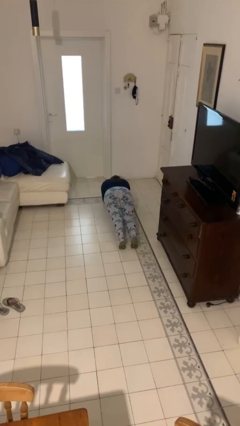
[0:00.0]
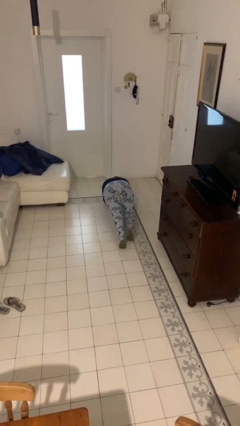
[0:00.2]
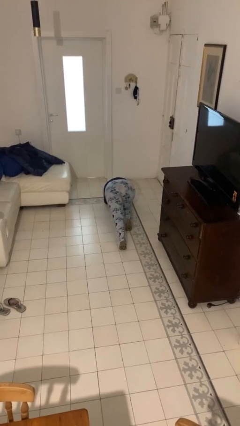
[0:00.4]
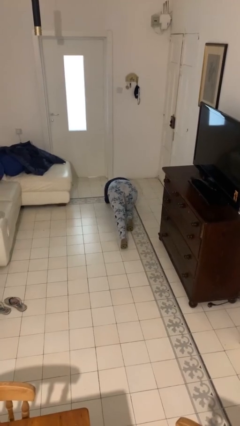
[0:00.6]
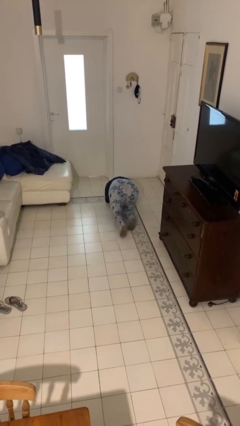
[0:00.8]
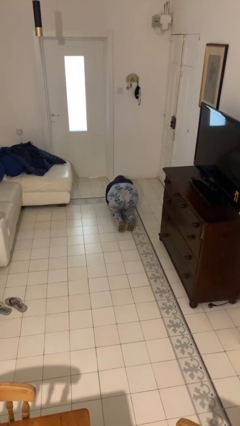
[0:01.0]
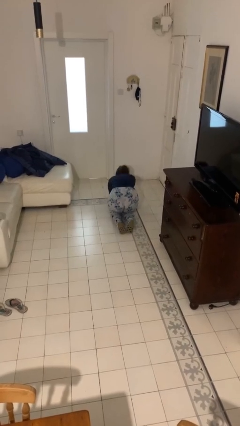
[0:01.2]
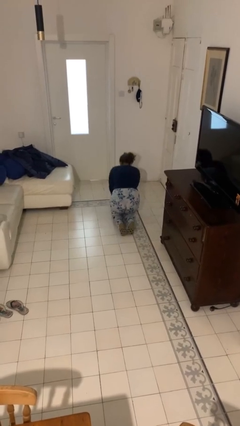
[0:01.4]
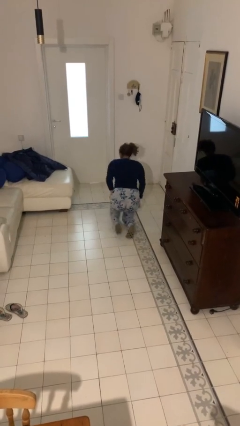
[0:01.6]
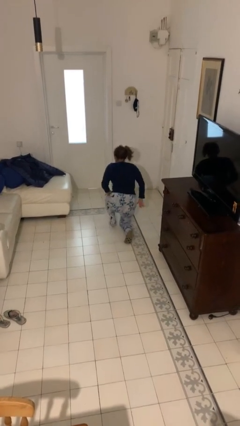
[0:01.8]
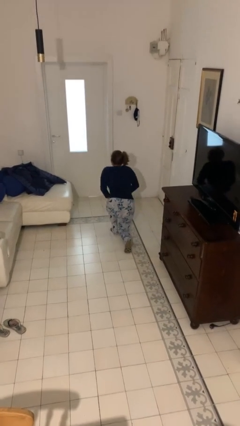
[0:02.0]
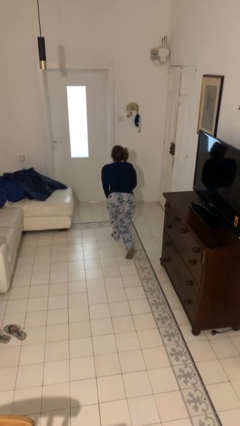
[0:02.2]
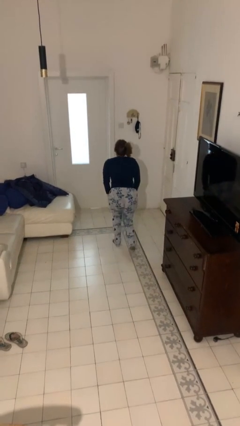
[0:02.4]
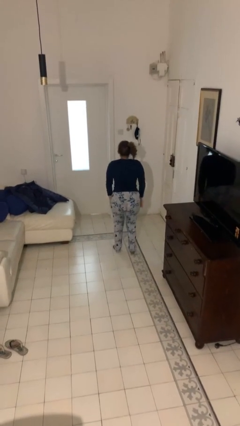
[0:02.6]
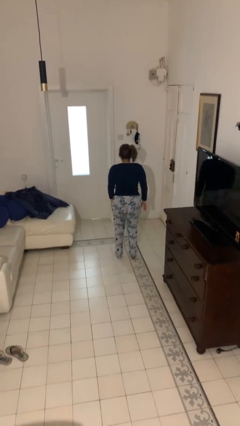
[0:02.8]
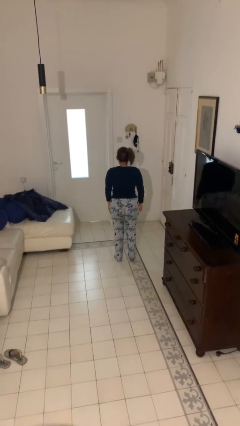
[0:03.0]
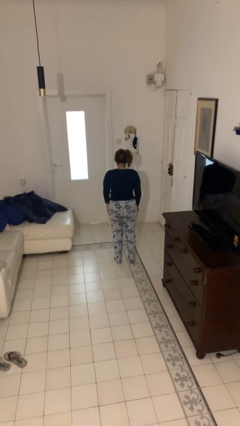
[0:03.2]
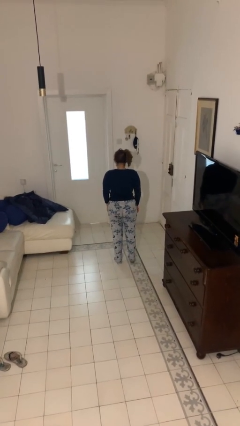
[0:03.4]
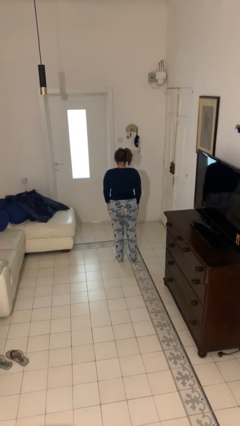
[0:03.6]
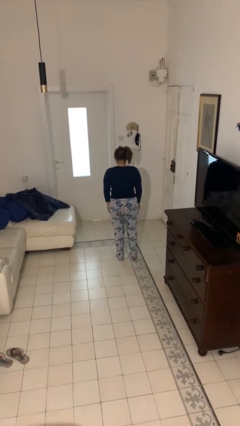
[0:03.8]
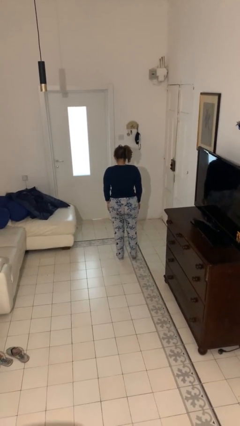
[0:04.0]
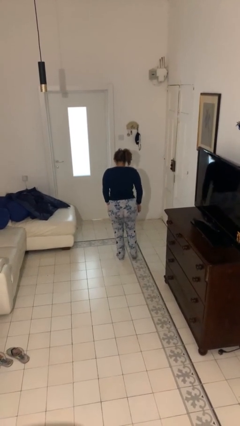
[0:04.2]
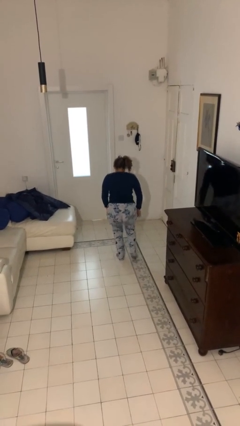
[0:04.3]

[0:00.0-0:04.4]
person stands up from floor

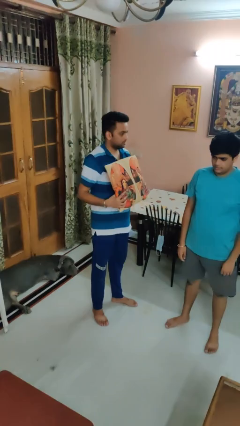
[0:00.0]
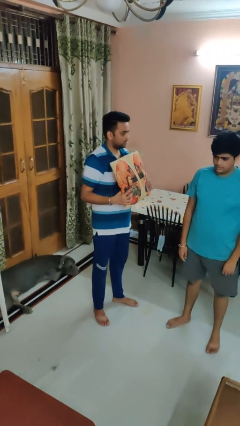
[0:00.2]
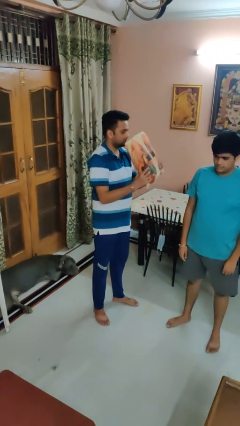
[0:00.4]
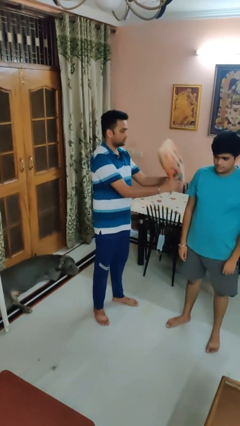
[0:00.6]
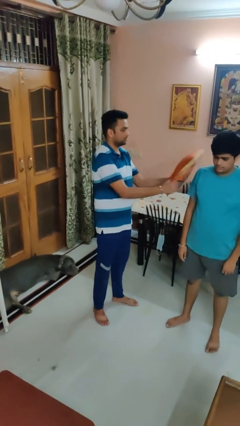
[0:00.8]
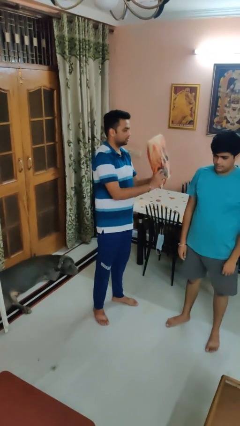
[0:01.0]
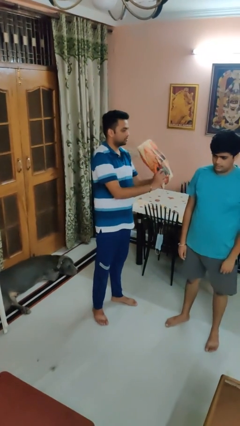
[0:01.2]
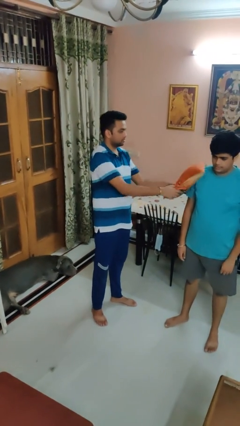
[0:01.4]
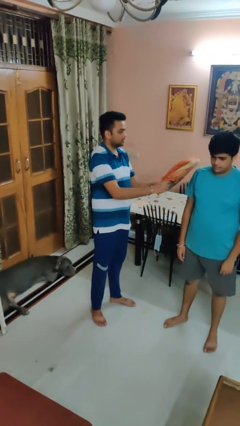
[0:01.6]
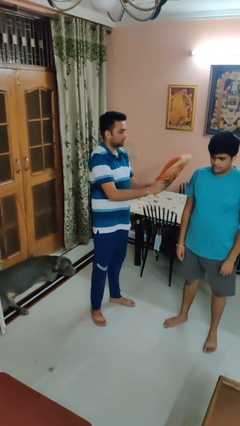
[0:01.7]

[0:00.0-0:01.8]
person hits person with pillow

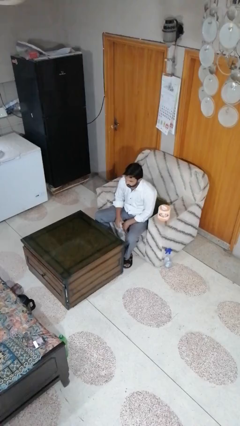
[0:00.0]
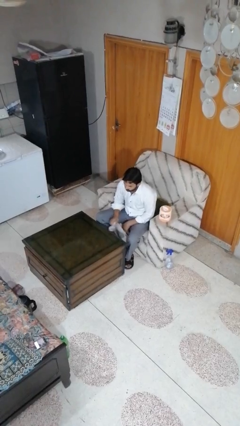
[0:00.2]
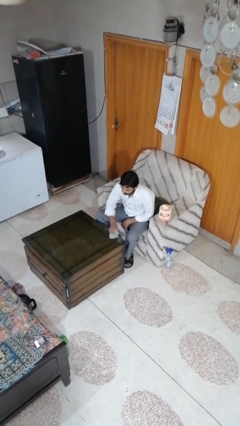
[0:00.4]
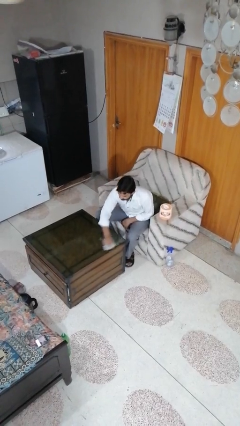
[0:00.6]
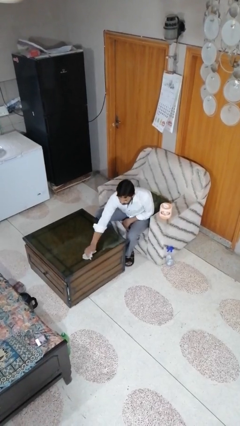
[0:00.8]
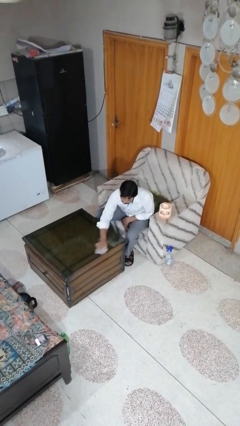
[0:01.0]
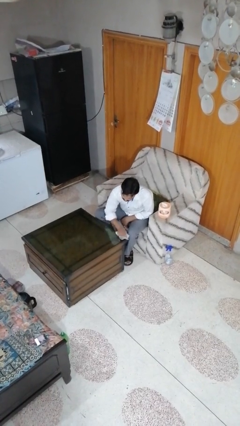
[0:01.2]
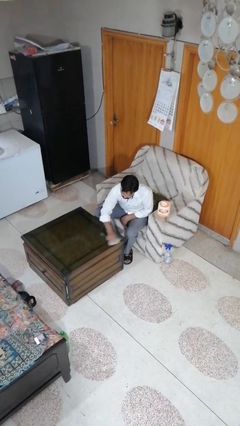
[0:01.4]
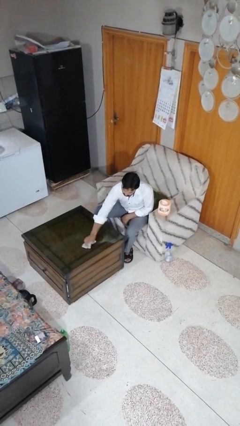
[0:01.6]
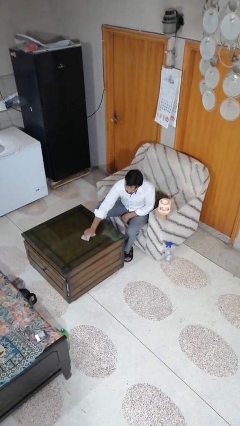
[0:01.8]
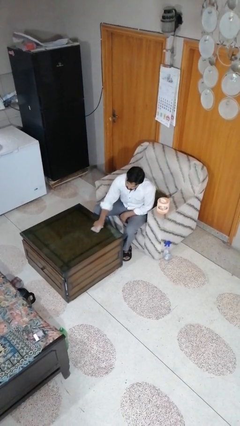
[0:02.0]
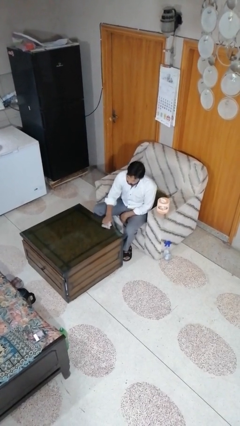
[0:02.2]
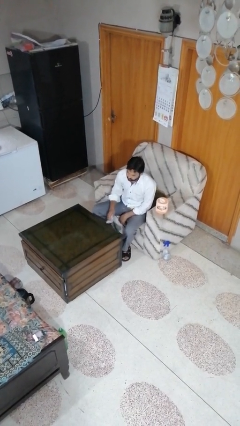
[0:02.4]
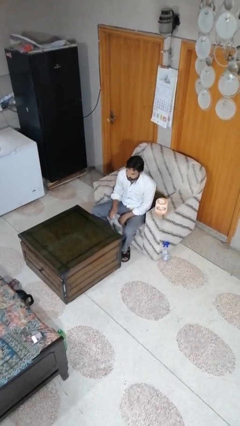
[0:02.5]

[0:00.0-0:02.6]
person cleans table with rag

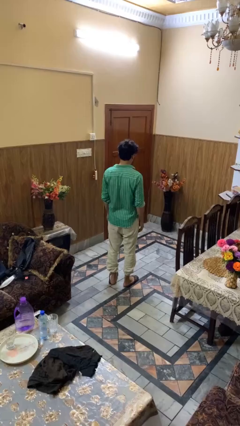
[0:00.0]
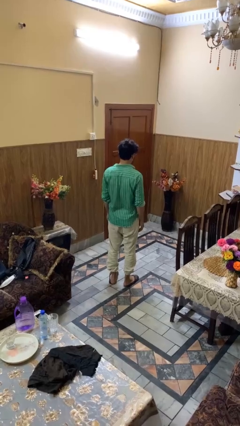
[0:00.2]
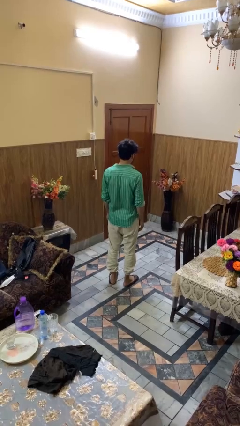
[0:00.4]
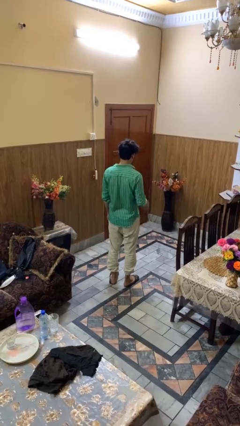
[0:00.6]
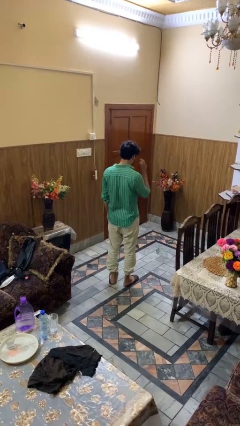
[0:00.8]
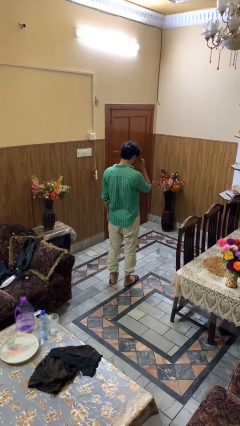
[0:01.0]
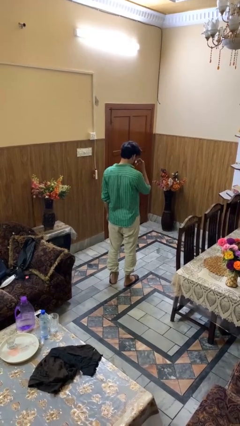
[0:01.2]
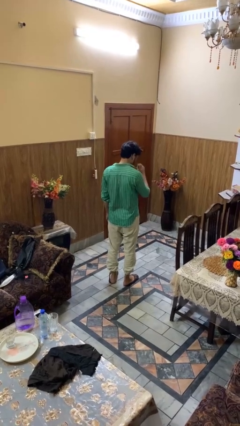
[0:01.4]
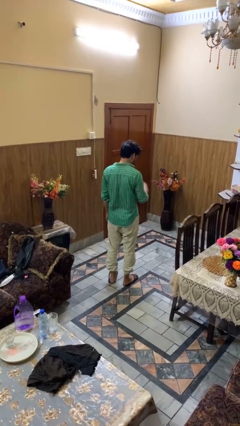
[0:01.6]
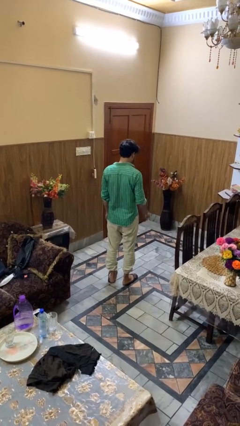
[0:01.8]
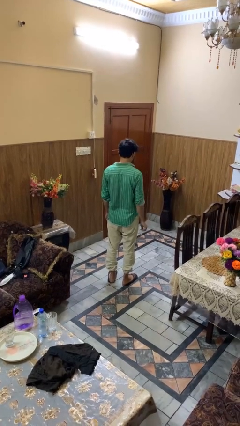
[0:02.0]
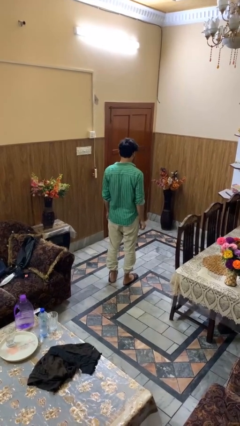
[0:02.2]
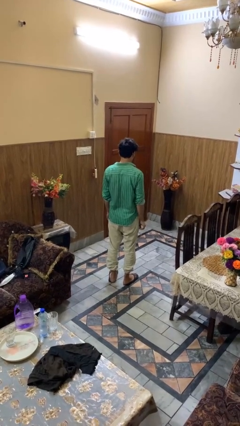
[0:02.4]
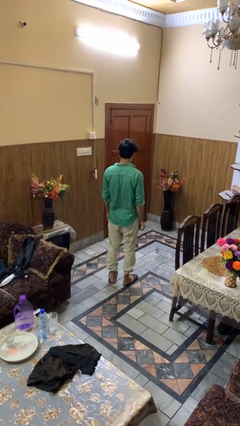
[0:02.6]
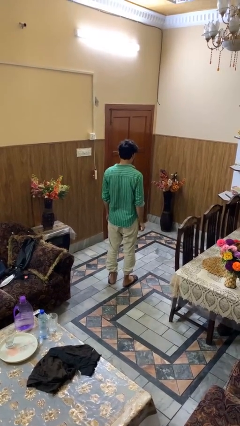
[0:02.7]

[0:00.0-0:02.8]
person takes off glasses

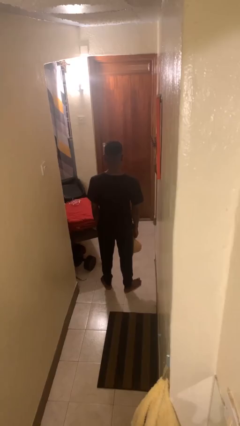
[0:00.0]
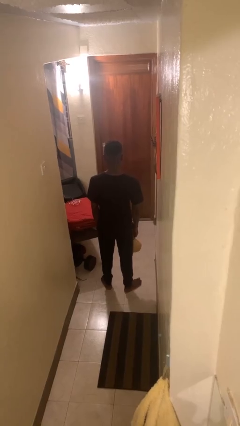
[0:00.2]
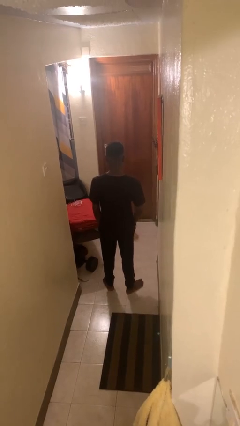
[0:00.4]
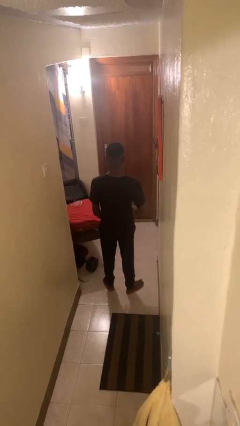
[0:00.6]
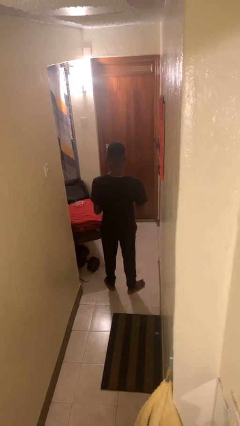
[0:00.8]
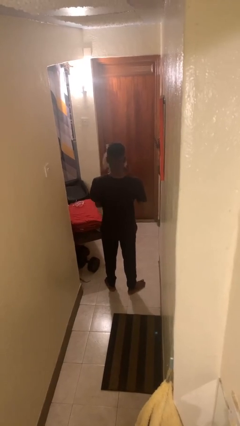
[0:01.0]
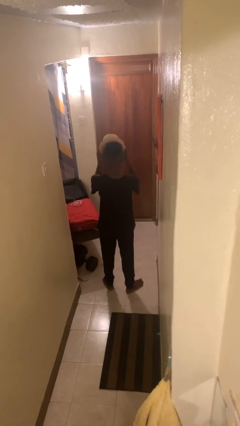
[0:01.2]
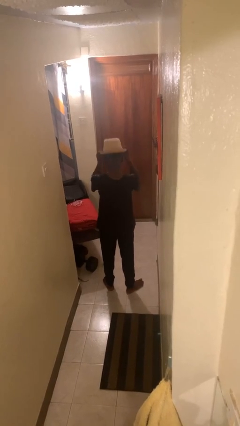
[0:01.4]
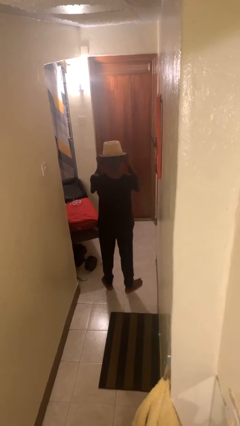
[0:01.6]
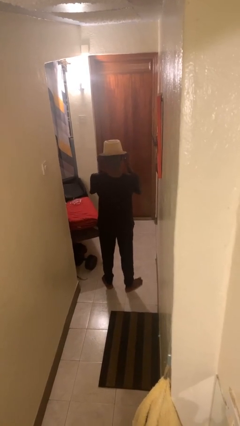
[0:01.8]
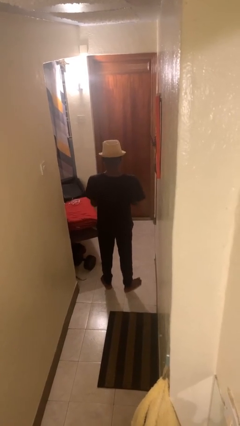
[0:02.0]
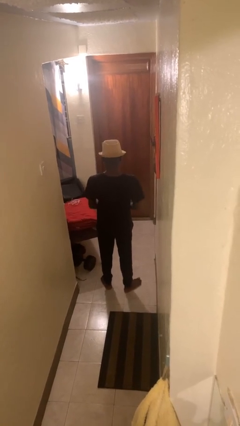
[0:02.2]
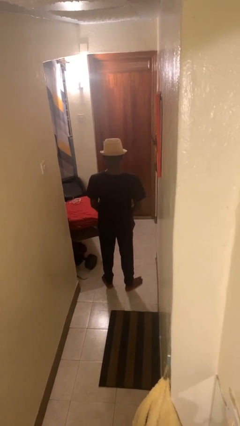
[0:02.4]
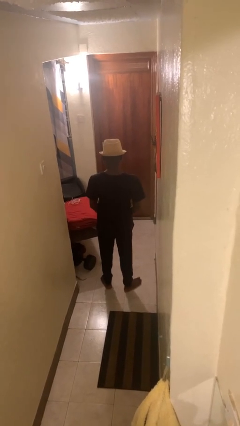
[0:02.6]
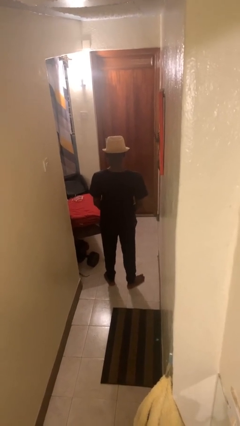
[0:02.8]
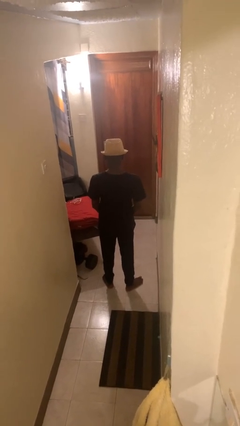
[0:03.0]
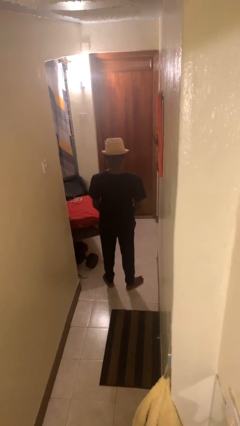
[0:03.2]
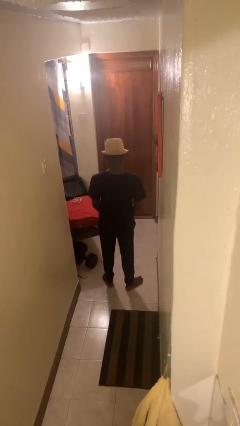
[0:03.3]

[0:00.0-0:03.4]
person puts on hat

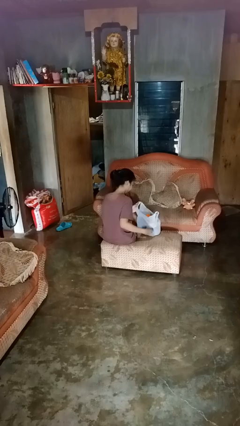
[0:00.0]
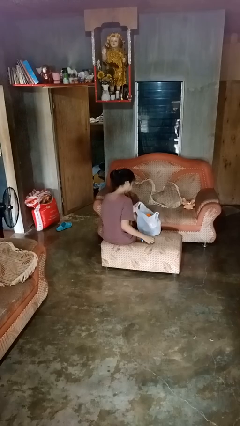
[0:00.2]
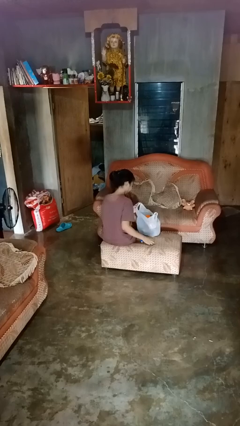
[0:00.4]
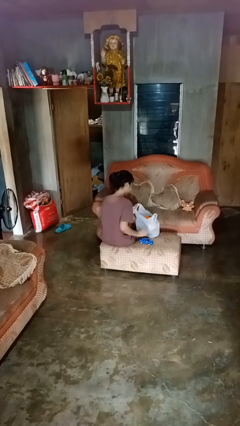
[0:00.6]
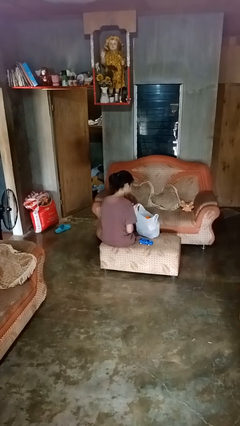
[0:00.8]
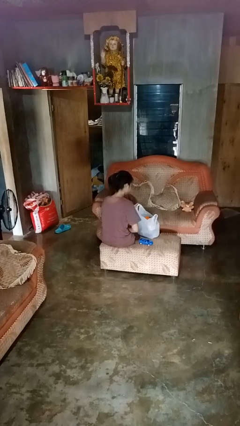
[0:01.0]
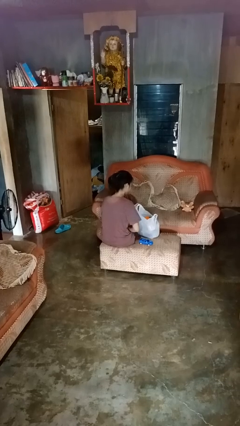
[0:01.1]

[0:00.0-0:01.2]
person takes object from bag

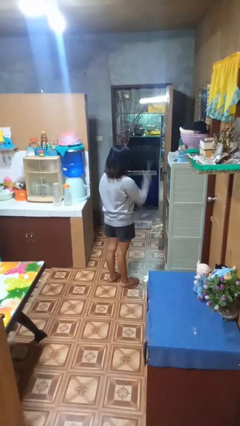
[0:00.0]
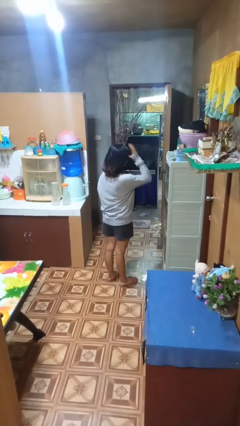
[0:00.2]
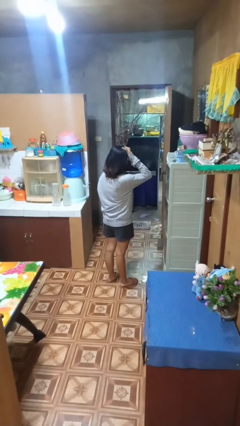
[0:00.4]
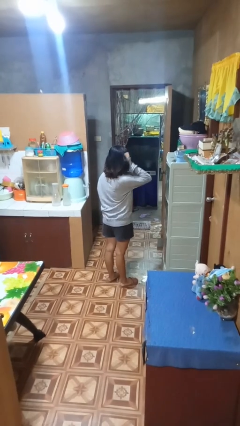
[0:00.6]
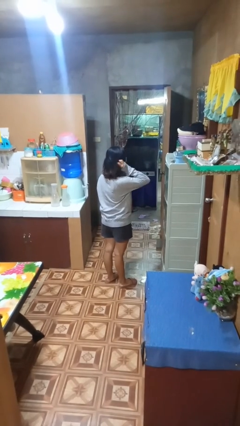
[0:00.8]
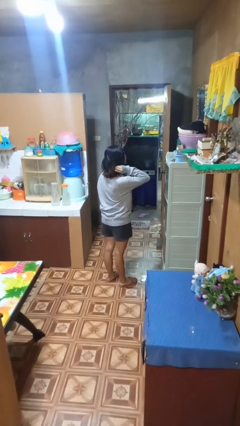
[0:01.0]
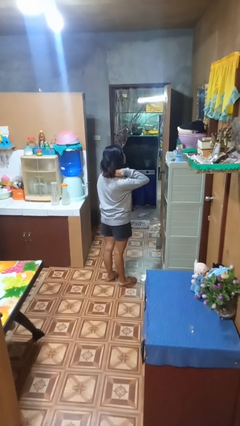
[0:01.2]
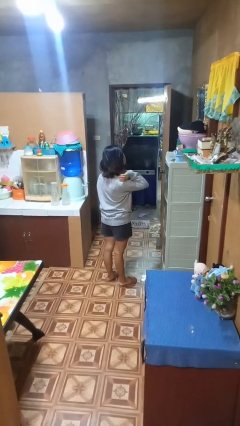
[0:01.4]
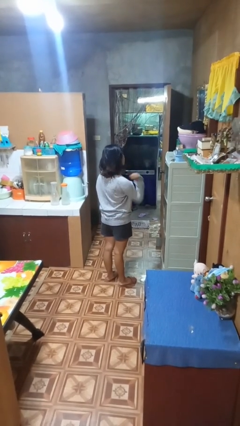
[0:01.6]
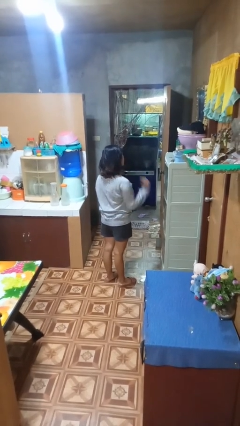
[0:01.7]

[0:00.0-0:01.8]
person strokes hair
